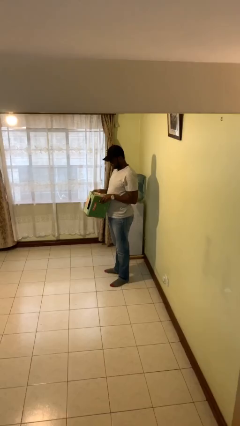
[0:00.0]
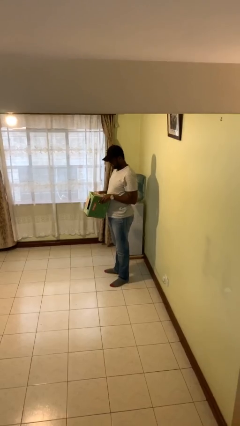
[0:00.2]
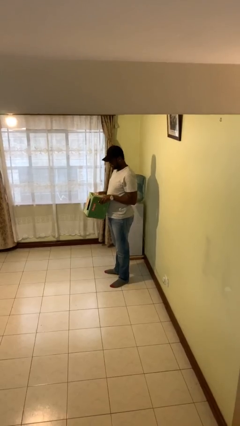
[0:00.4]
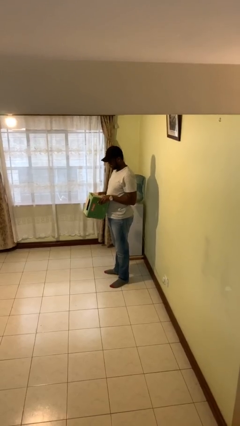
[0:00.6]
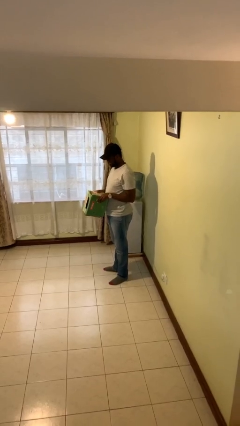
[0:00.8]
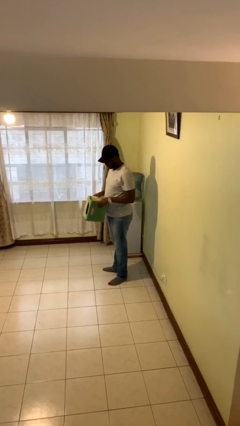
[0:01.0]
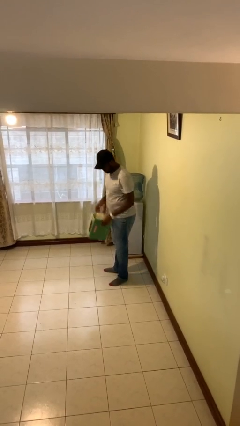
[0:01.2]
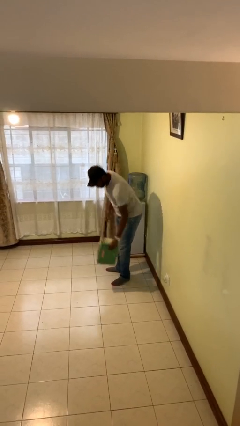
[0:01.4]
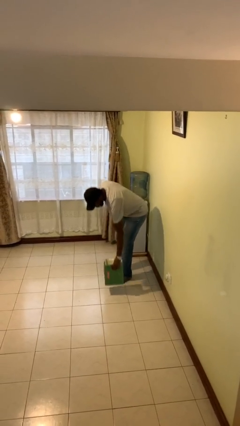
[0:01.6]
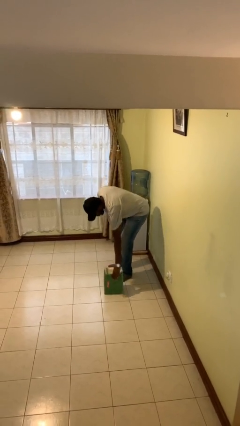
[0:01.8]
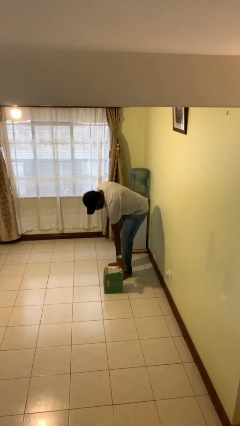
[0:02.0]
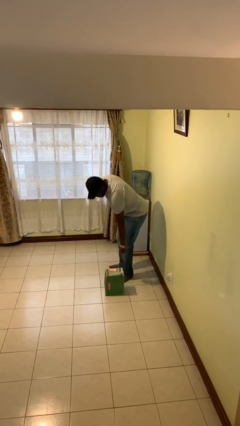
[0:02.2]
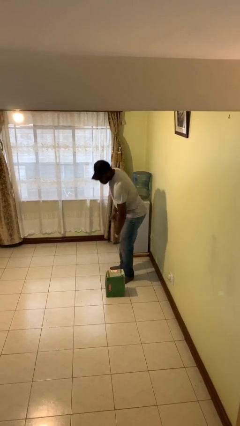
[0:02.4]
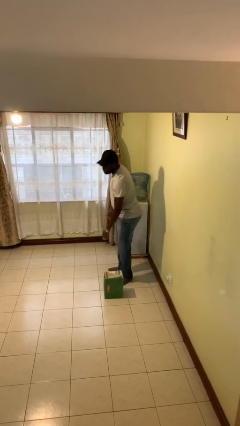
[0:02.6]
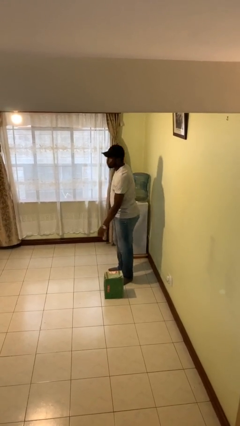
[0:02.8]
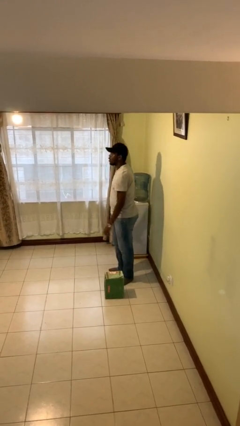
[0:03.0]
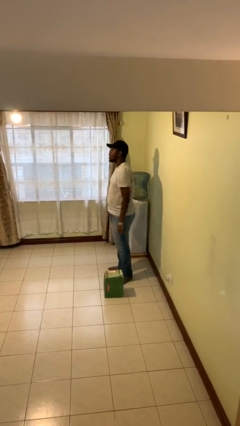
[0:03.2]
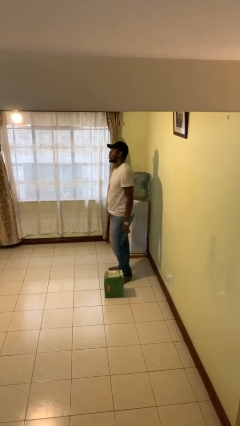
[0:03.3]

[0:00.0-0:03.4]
person puts down object on floor

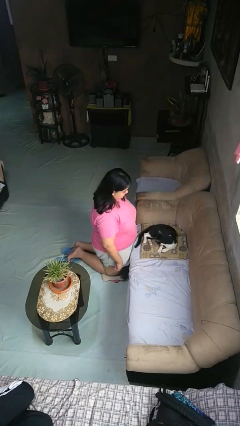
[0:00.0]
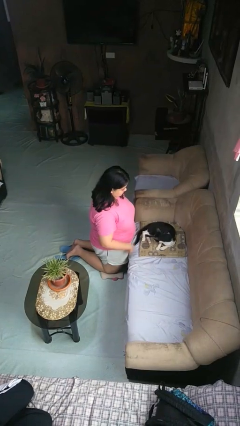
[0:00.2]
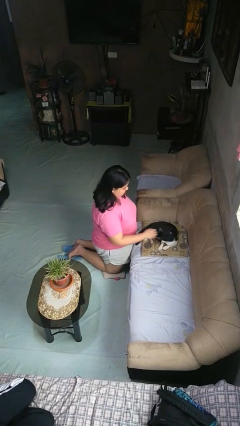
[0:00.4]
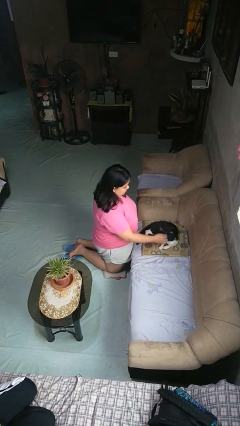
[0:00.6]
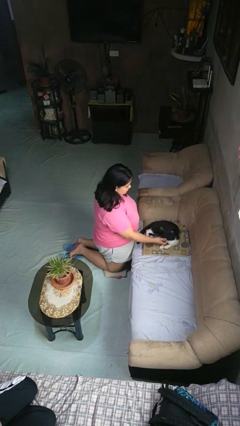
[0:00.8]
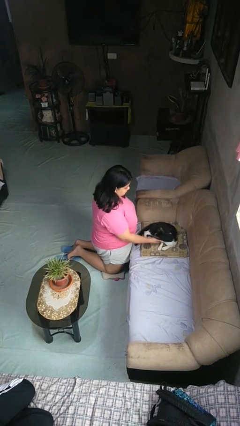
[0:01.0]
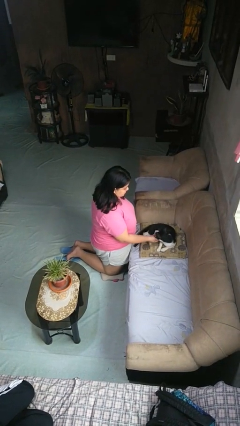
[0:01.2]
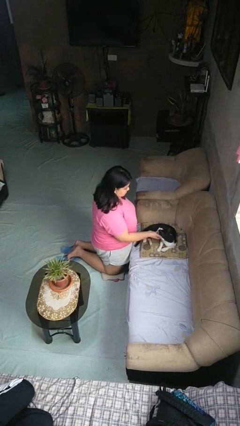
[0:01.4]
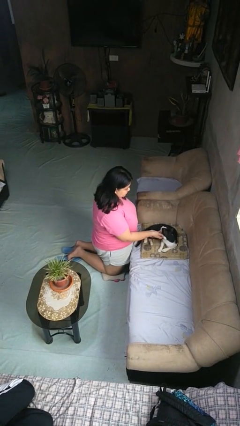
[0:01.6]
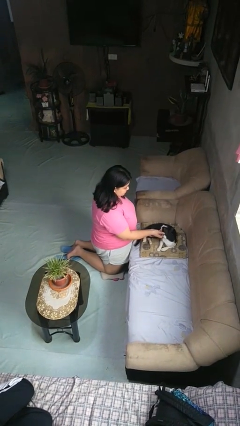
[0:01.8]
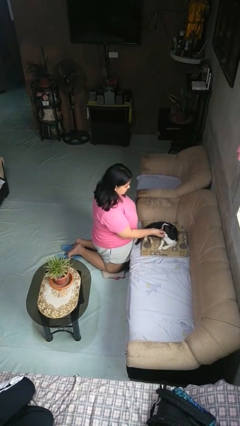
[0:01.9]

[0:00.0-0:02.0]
person pets cat

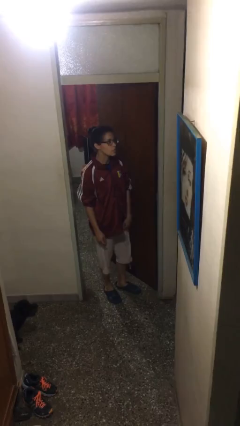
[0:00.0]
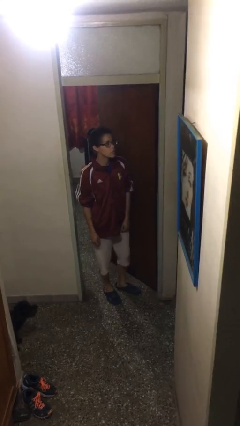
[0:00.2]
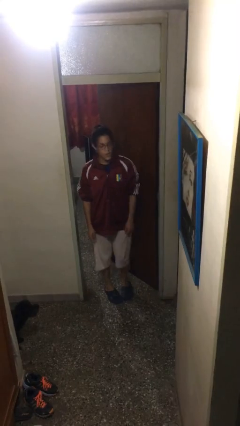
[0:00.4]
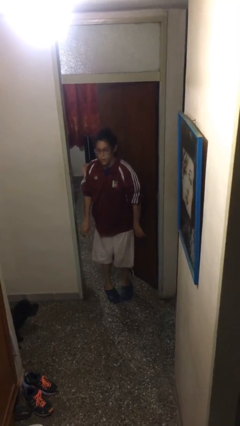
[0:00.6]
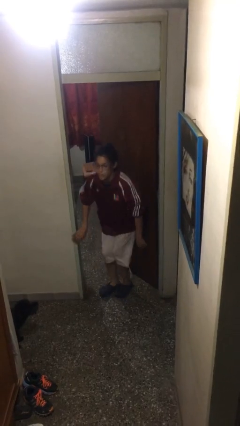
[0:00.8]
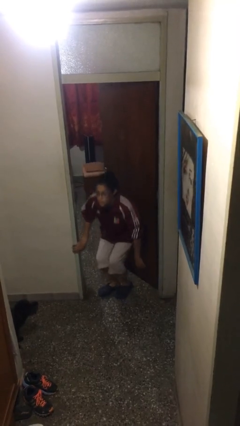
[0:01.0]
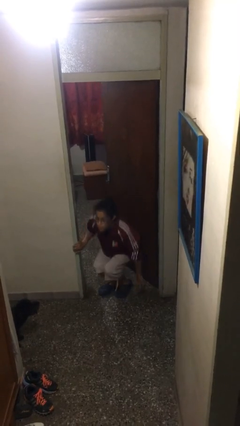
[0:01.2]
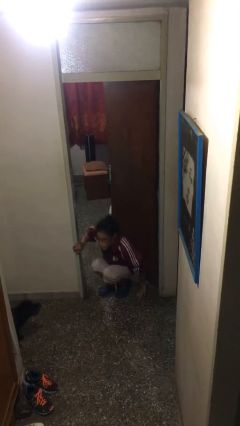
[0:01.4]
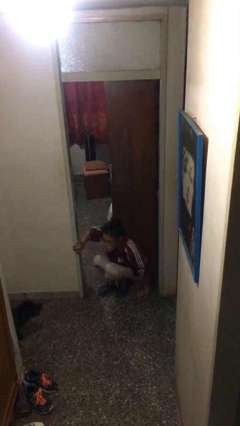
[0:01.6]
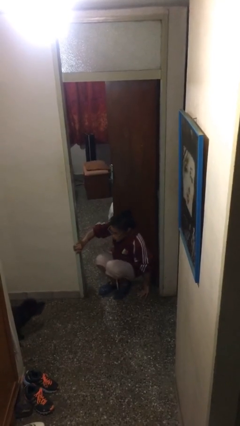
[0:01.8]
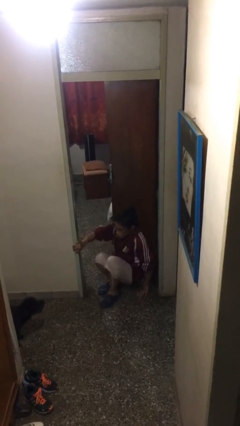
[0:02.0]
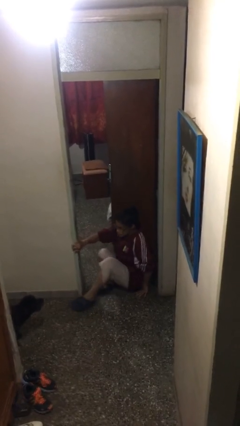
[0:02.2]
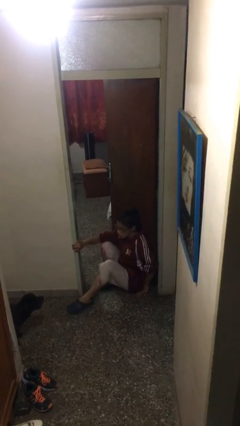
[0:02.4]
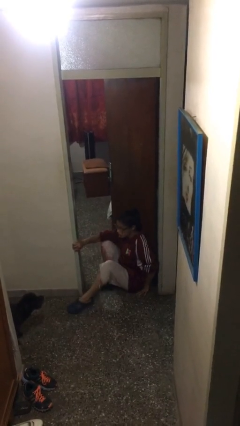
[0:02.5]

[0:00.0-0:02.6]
person sits down

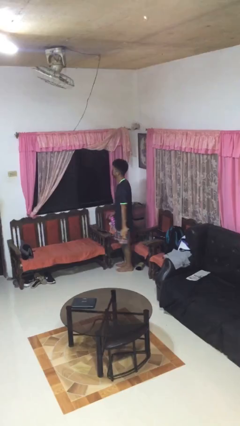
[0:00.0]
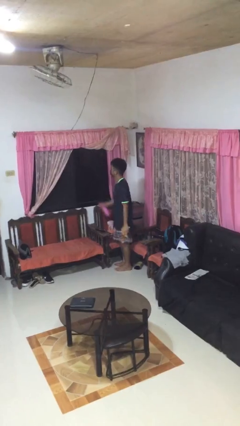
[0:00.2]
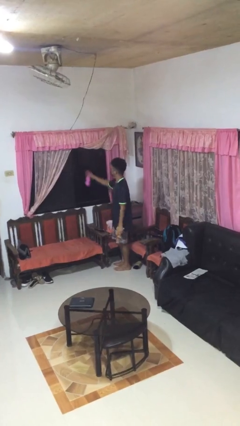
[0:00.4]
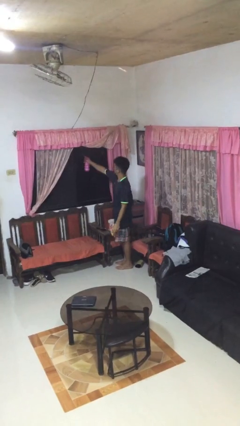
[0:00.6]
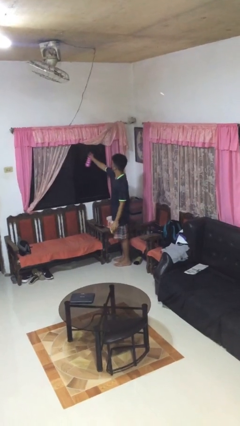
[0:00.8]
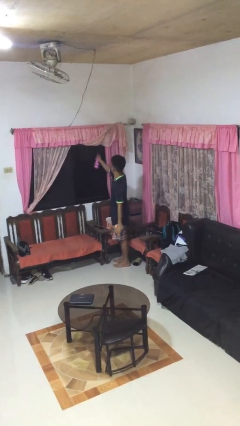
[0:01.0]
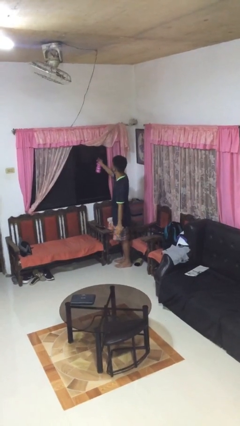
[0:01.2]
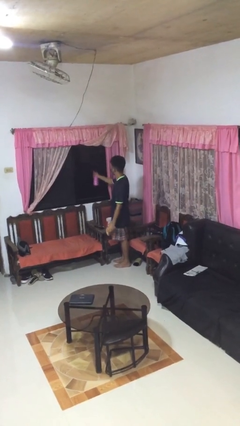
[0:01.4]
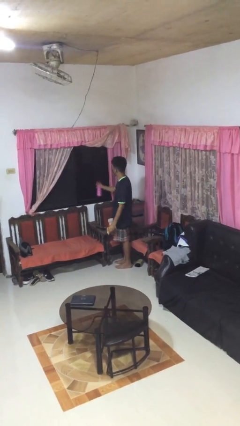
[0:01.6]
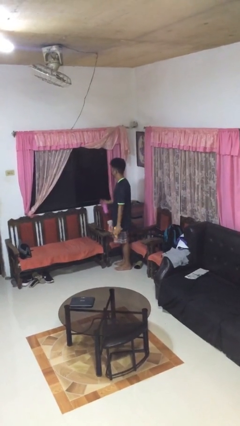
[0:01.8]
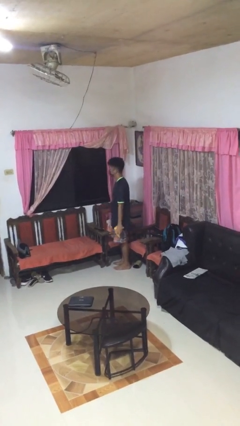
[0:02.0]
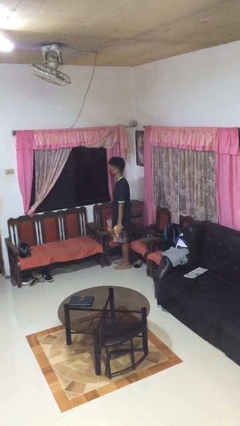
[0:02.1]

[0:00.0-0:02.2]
person sprays from bottle

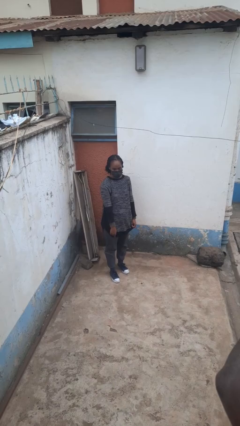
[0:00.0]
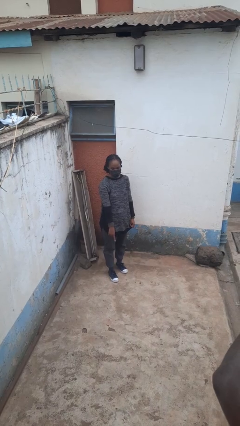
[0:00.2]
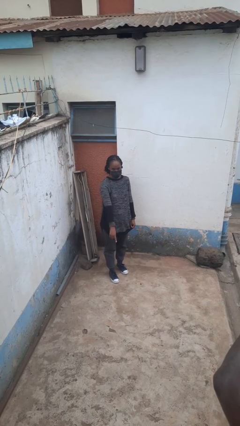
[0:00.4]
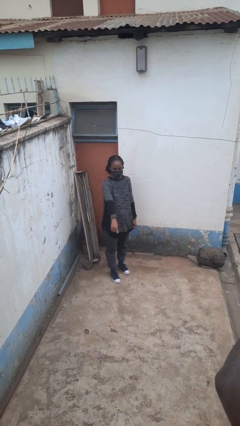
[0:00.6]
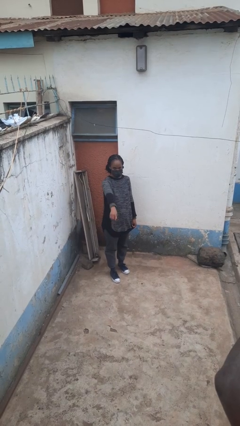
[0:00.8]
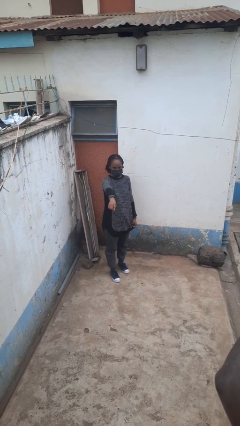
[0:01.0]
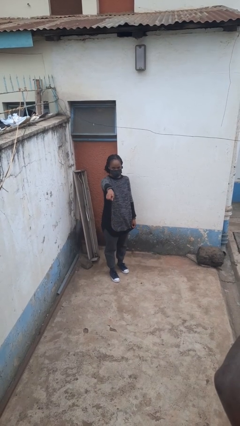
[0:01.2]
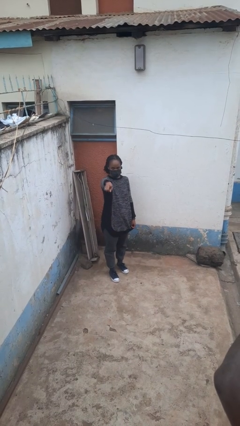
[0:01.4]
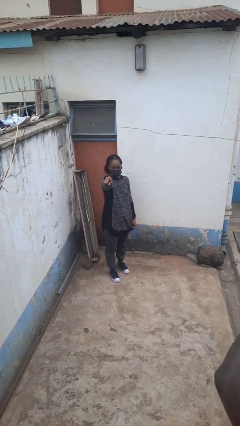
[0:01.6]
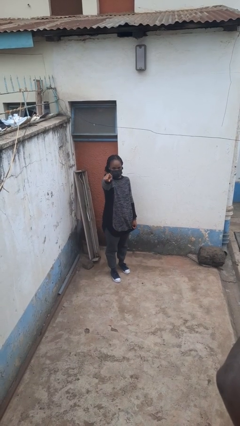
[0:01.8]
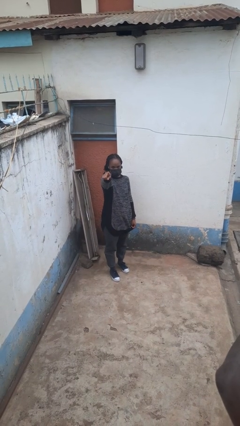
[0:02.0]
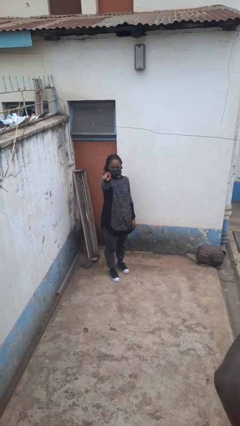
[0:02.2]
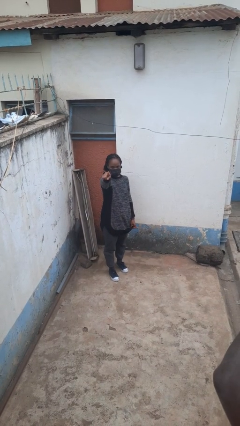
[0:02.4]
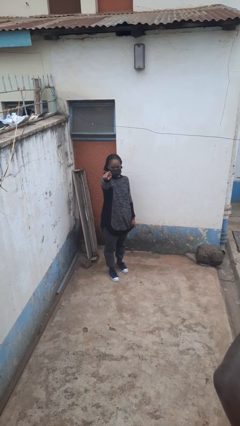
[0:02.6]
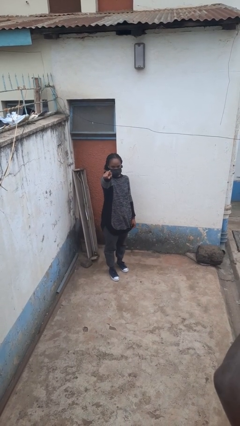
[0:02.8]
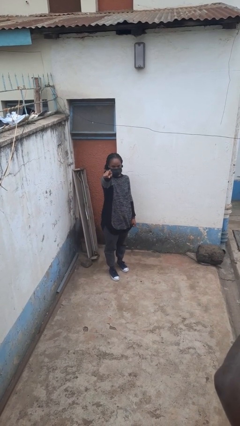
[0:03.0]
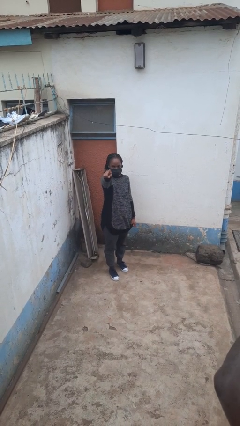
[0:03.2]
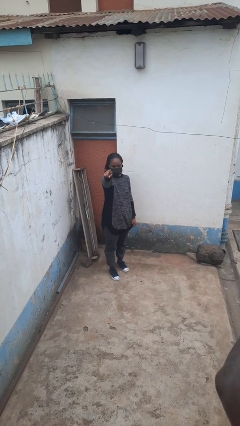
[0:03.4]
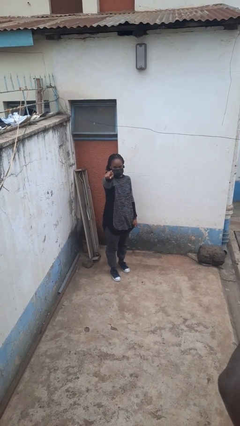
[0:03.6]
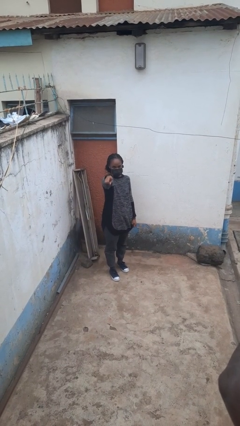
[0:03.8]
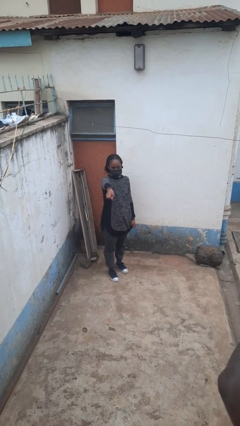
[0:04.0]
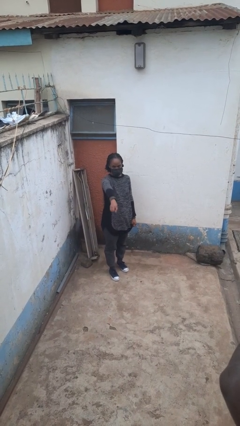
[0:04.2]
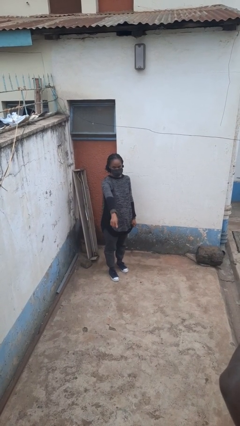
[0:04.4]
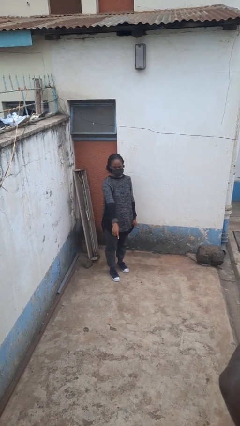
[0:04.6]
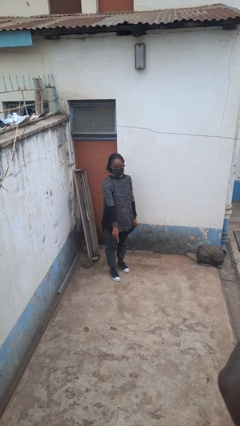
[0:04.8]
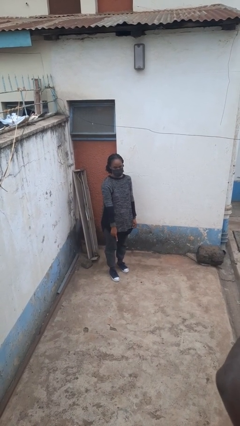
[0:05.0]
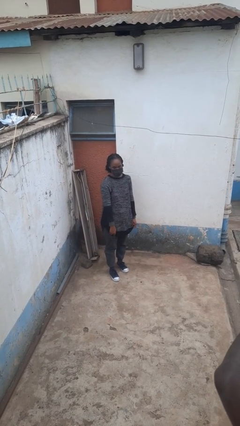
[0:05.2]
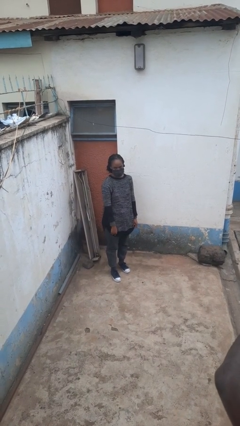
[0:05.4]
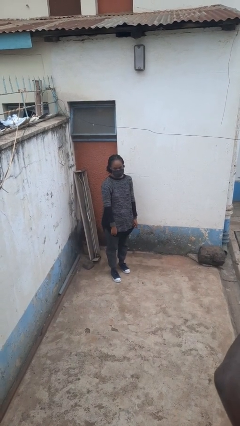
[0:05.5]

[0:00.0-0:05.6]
person points at person

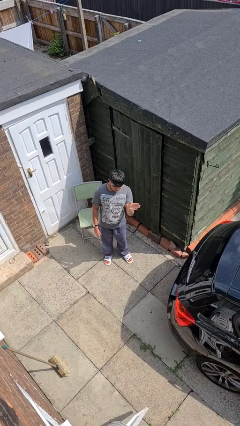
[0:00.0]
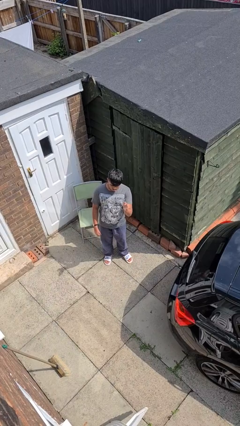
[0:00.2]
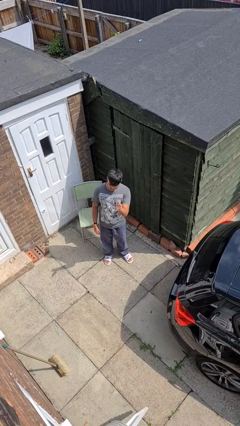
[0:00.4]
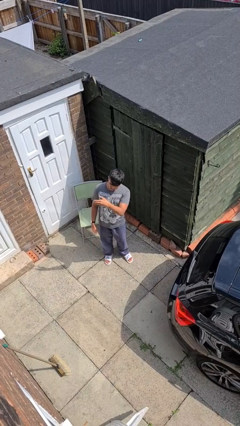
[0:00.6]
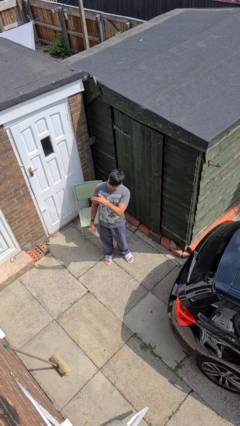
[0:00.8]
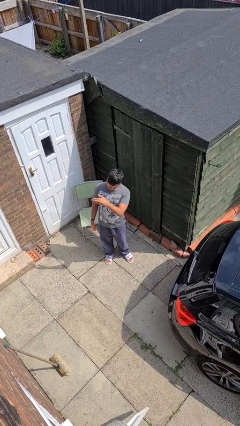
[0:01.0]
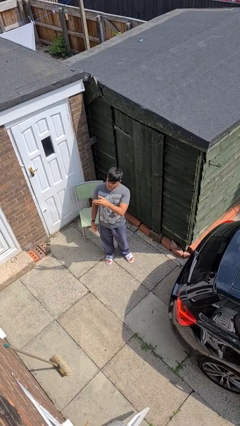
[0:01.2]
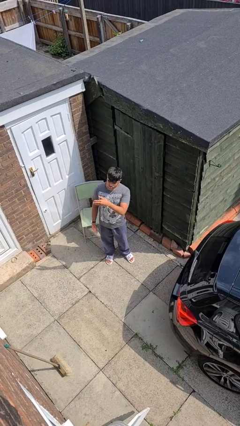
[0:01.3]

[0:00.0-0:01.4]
person gestures swipe right

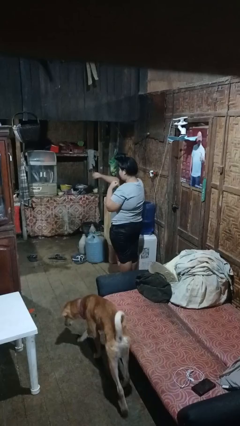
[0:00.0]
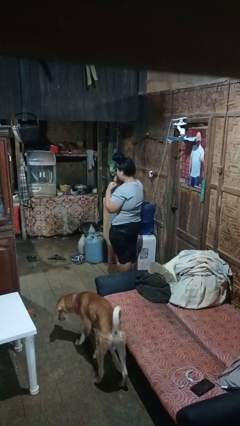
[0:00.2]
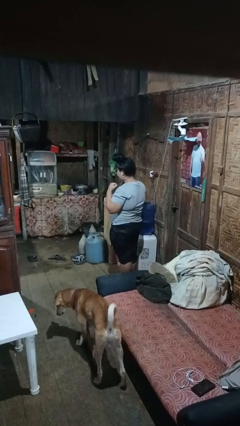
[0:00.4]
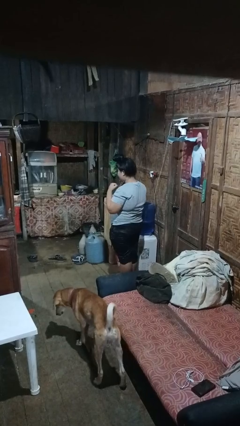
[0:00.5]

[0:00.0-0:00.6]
person punches
